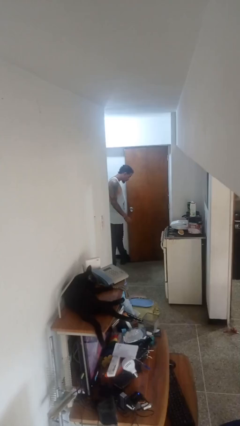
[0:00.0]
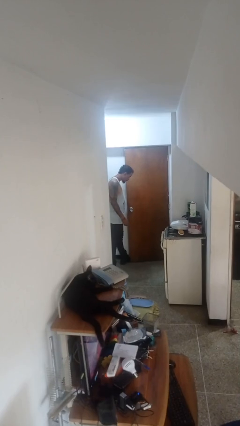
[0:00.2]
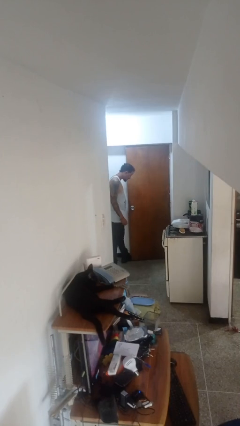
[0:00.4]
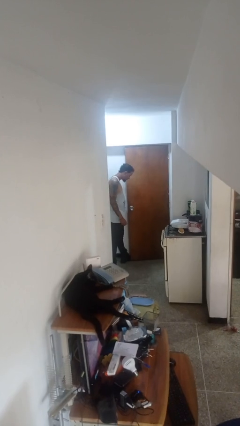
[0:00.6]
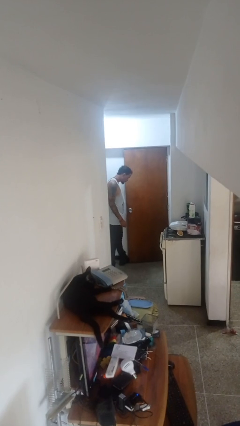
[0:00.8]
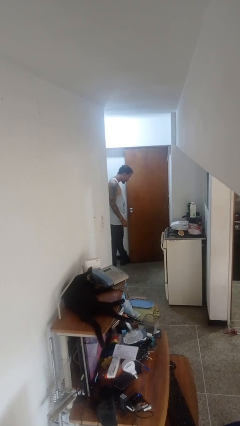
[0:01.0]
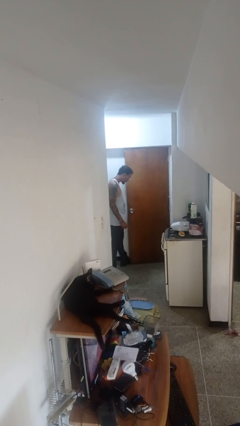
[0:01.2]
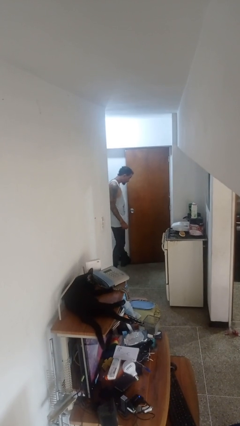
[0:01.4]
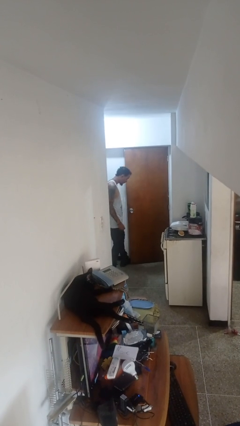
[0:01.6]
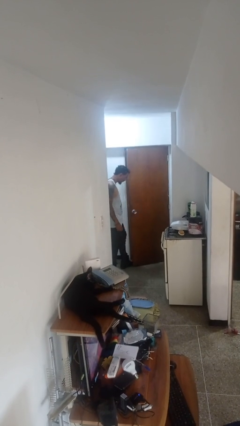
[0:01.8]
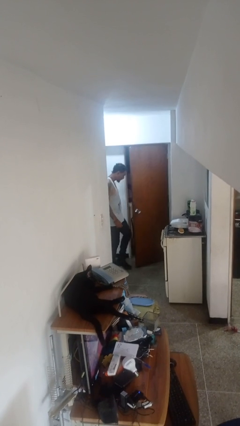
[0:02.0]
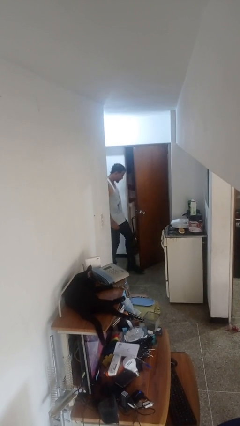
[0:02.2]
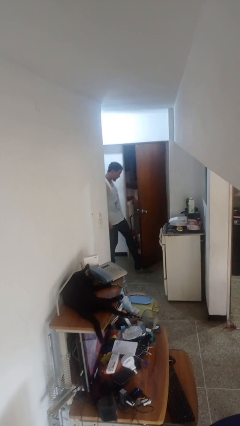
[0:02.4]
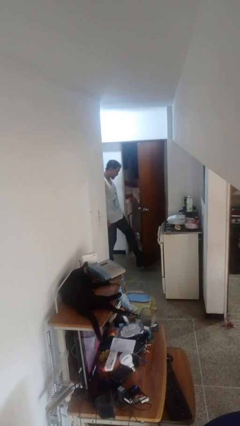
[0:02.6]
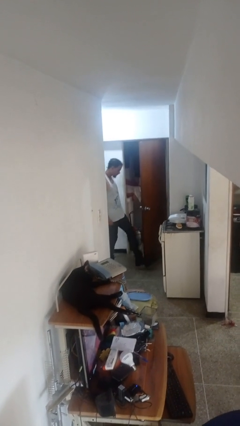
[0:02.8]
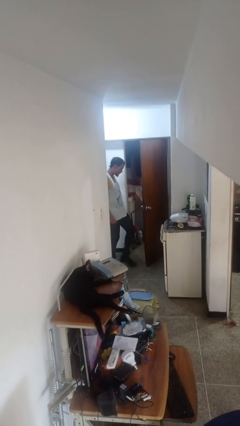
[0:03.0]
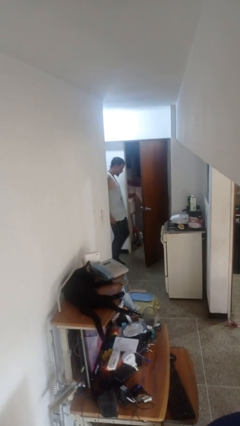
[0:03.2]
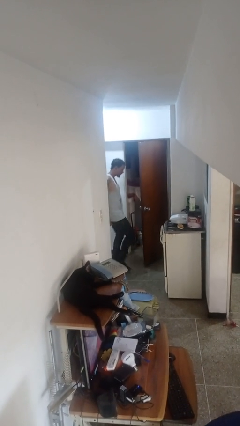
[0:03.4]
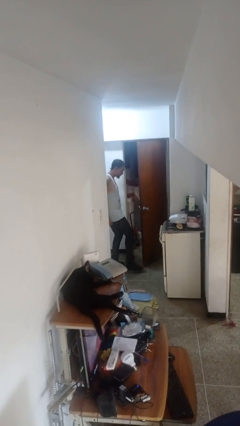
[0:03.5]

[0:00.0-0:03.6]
person opens facility door

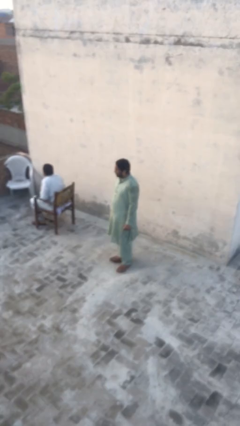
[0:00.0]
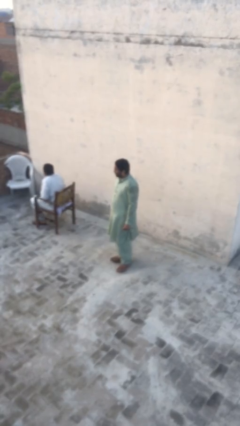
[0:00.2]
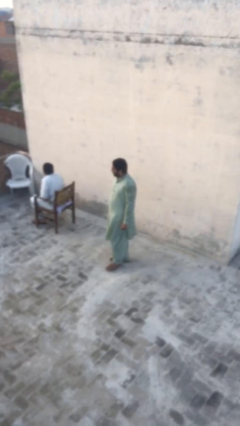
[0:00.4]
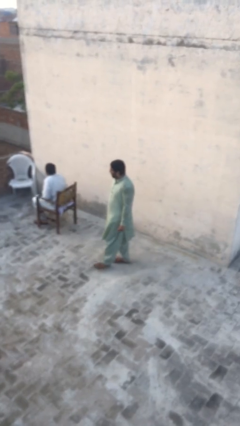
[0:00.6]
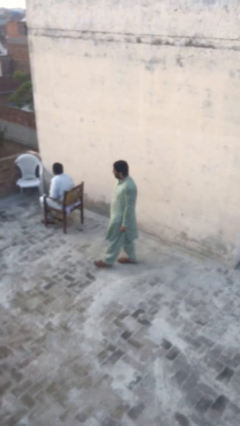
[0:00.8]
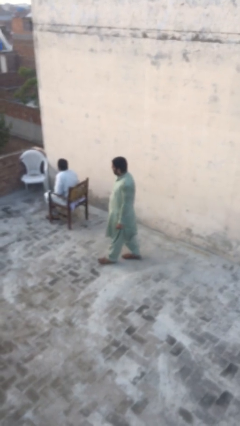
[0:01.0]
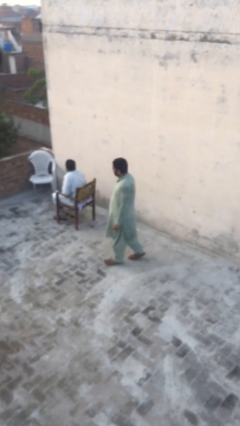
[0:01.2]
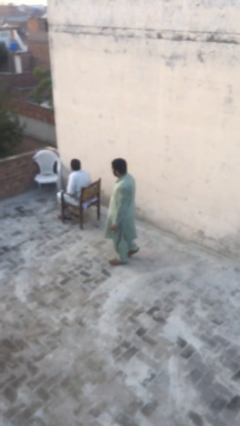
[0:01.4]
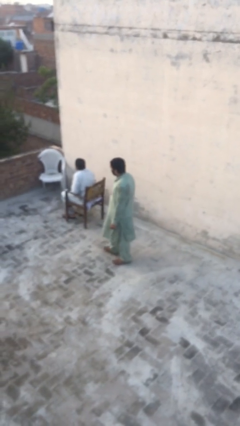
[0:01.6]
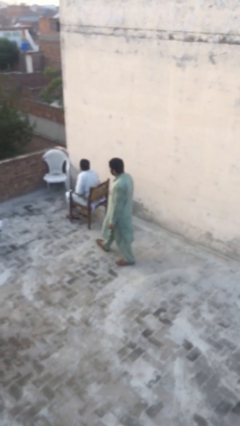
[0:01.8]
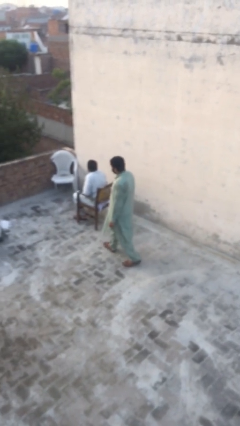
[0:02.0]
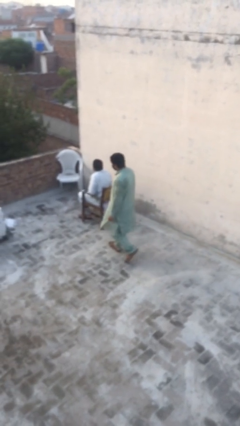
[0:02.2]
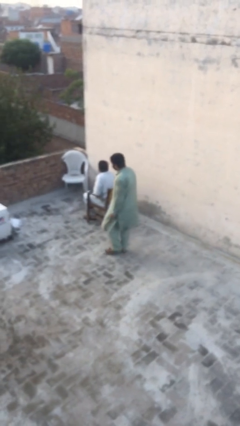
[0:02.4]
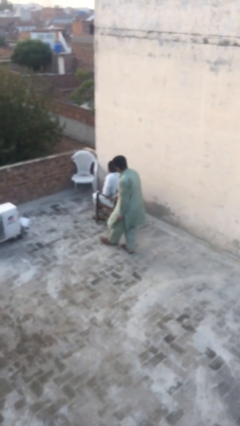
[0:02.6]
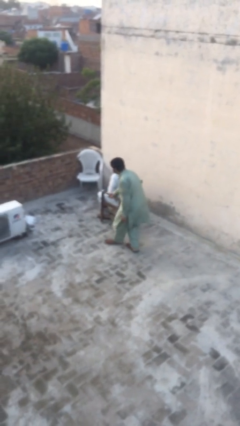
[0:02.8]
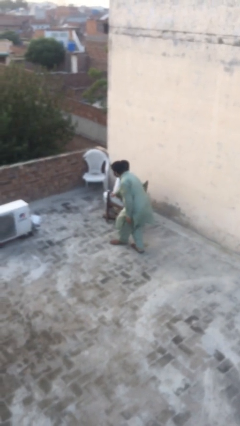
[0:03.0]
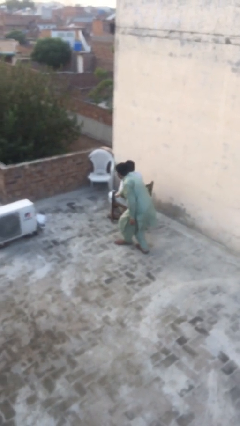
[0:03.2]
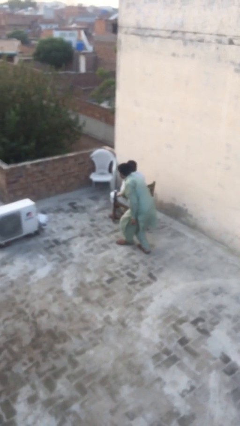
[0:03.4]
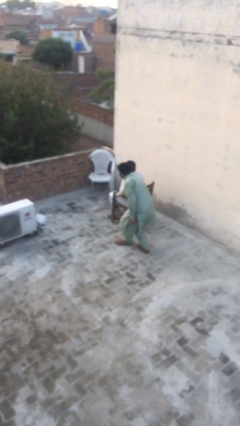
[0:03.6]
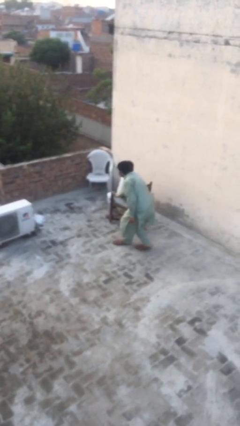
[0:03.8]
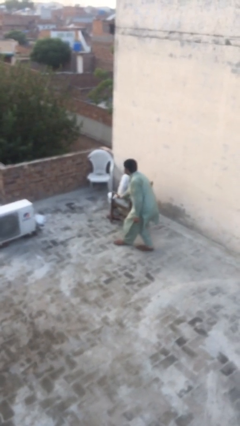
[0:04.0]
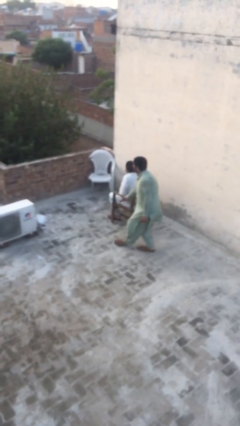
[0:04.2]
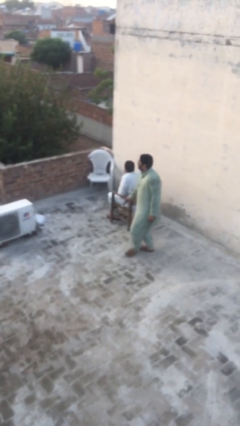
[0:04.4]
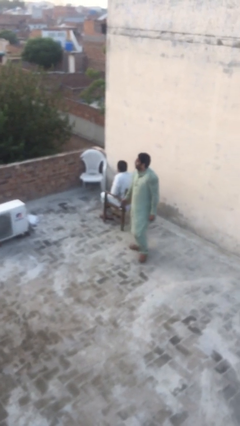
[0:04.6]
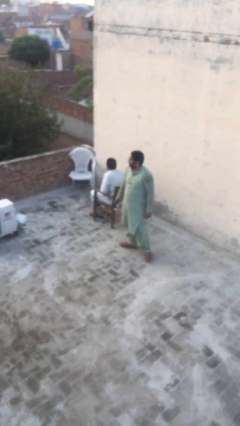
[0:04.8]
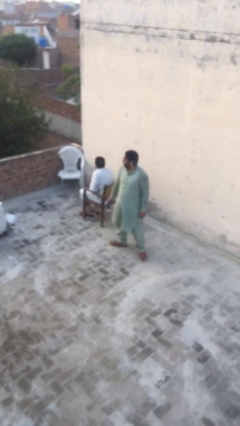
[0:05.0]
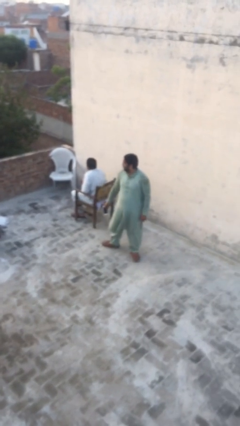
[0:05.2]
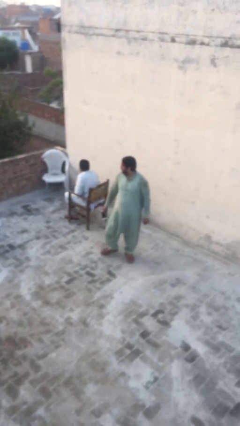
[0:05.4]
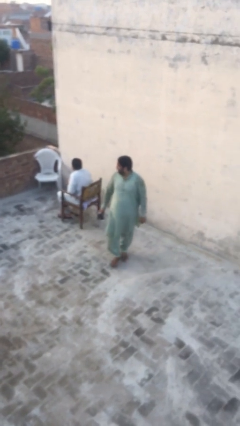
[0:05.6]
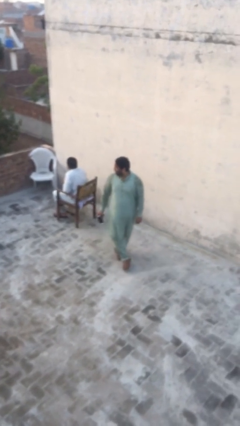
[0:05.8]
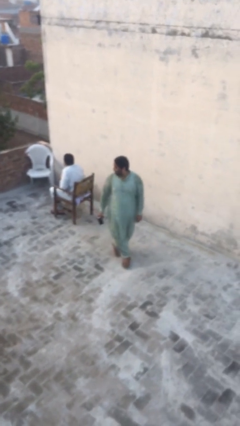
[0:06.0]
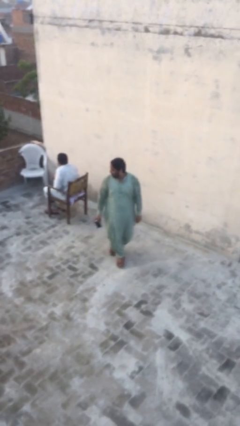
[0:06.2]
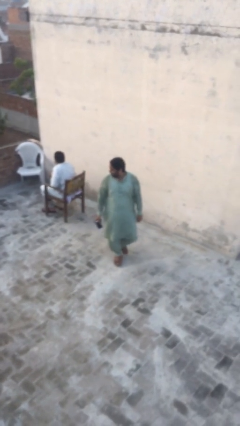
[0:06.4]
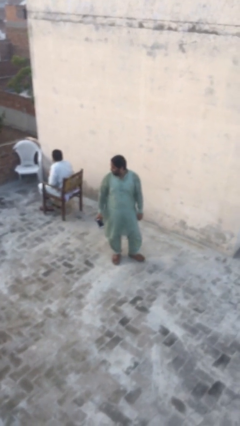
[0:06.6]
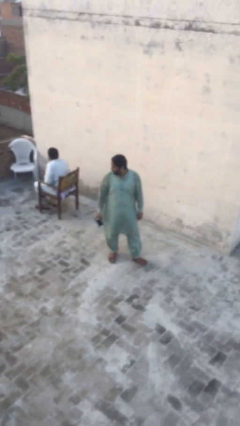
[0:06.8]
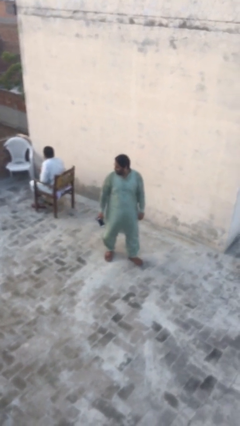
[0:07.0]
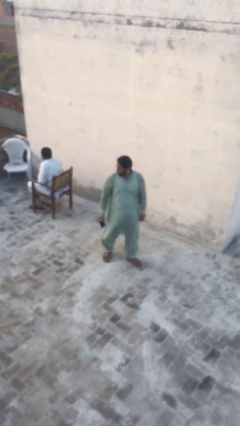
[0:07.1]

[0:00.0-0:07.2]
person steals object from person

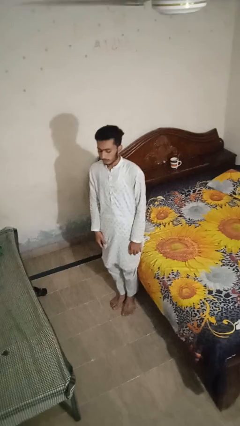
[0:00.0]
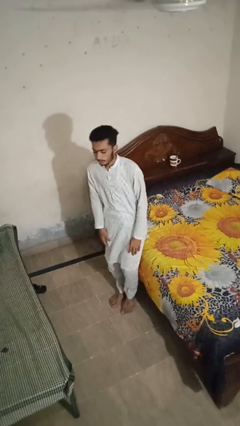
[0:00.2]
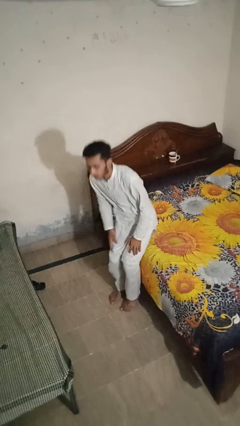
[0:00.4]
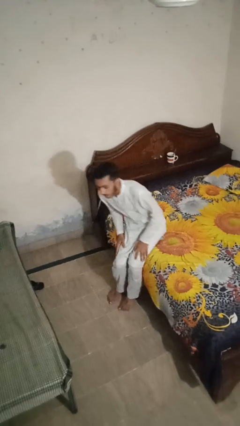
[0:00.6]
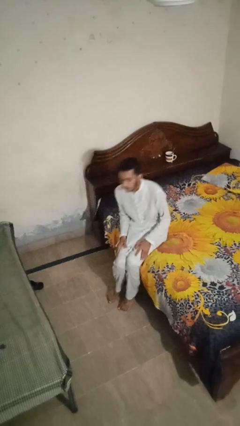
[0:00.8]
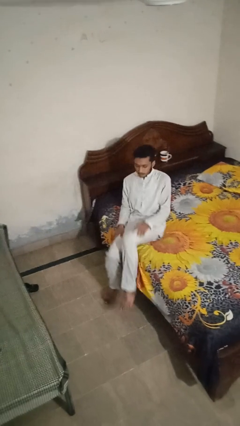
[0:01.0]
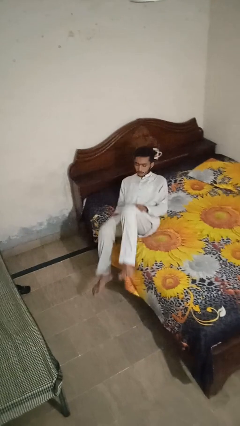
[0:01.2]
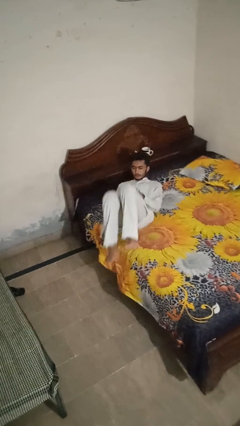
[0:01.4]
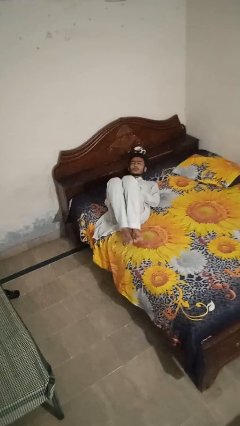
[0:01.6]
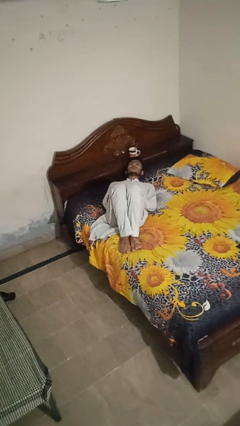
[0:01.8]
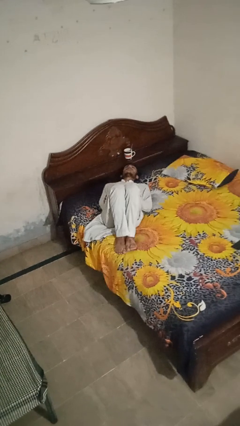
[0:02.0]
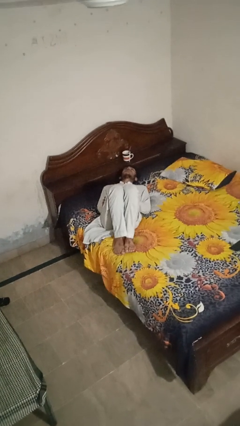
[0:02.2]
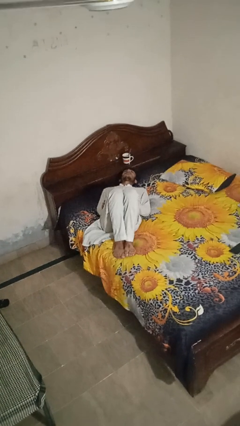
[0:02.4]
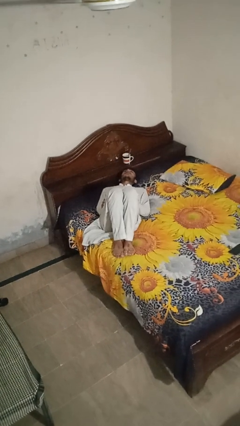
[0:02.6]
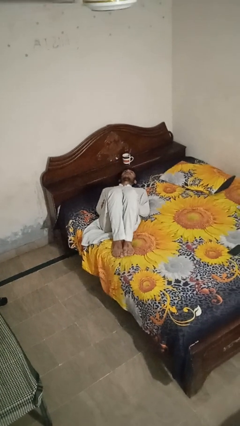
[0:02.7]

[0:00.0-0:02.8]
person lies down on bed

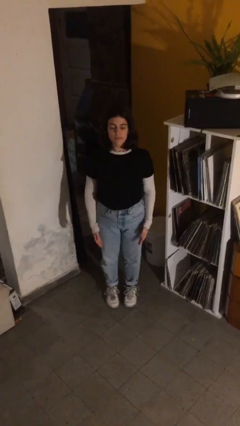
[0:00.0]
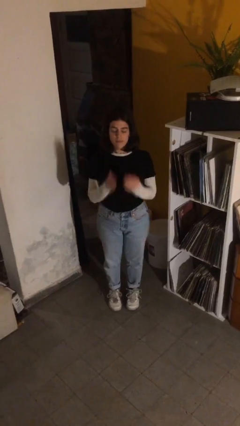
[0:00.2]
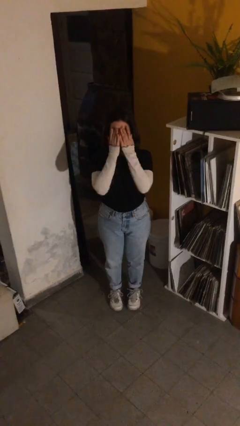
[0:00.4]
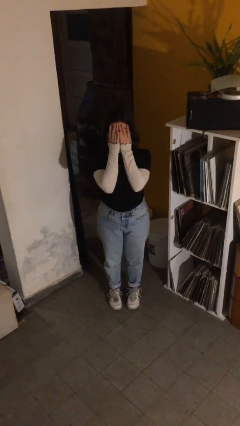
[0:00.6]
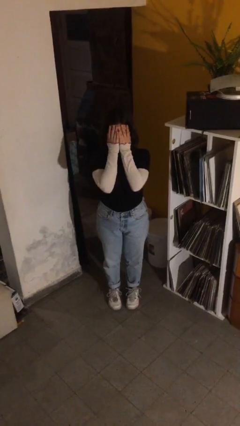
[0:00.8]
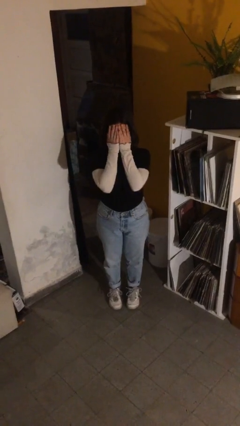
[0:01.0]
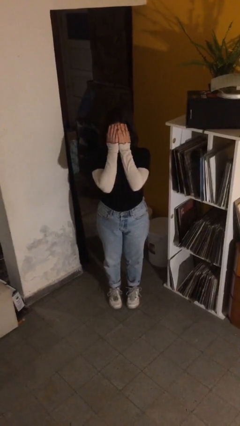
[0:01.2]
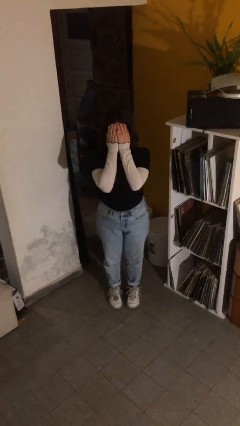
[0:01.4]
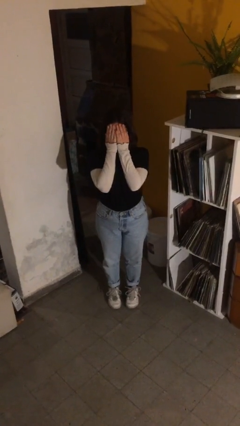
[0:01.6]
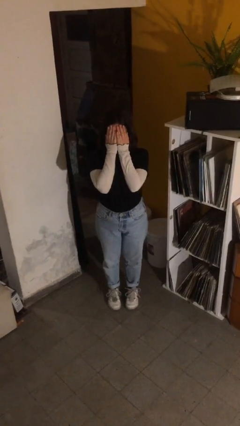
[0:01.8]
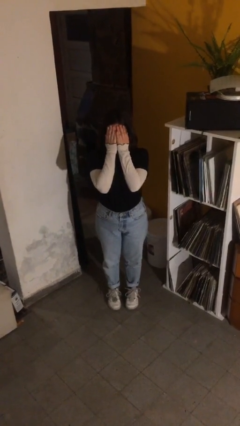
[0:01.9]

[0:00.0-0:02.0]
person covers face with hands

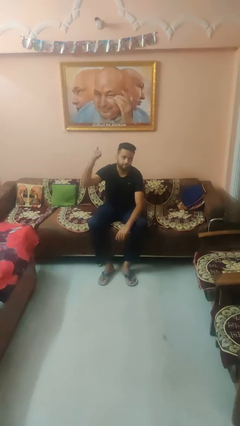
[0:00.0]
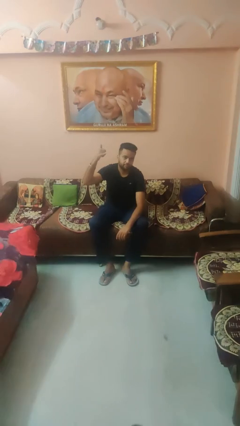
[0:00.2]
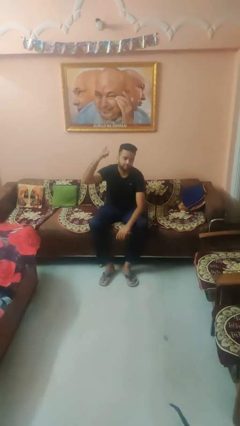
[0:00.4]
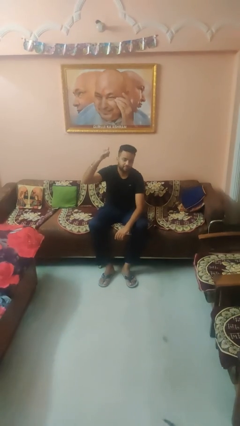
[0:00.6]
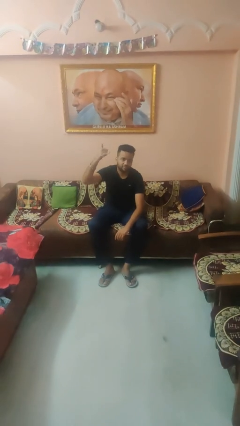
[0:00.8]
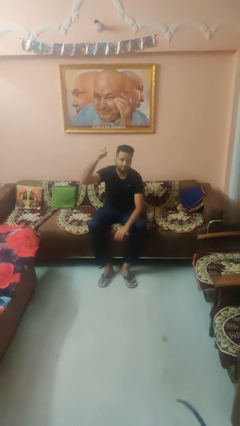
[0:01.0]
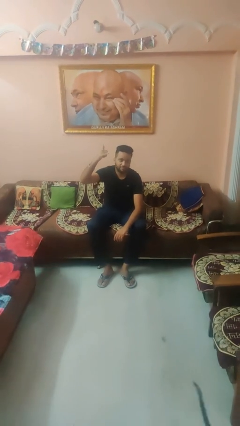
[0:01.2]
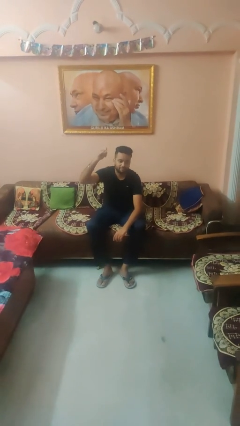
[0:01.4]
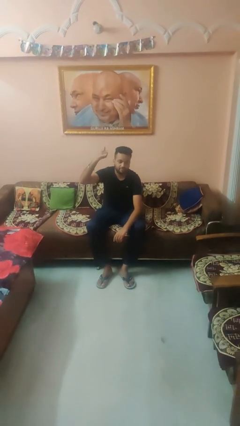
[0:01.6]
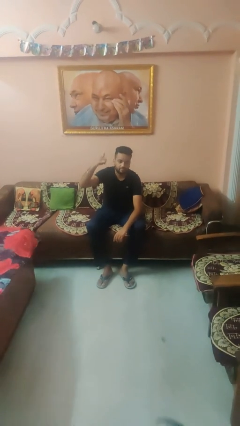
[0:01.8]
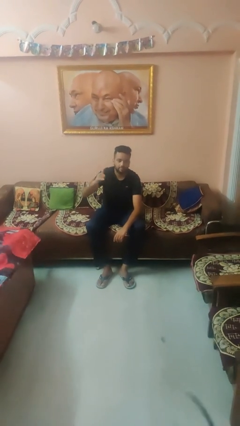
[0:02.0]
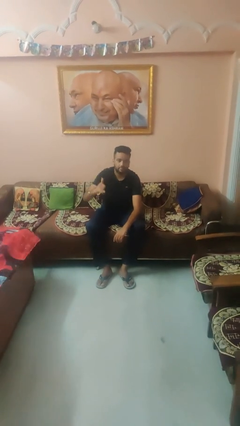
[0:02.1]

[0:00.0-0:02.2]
person gestures hang loose
